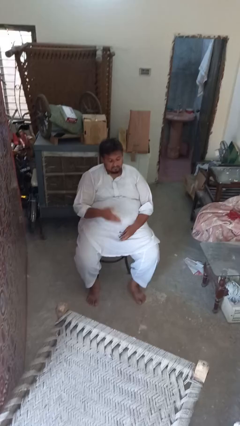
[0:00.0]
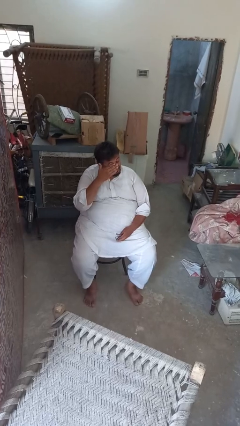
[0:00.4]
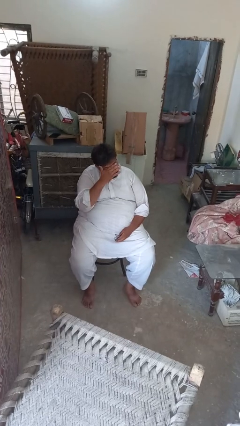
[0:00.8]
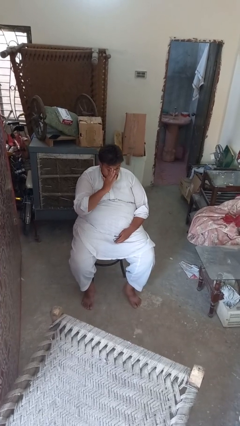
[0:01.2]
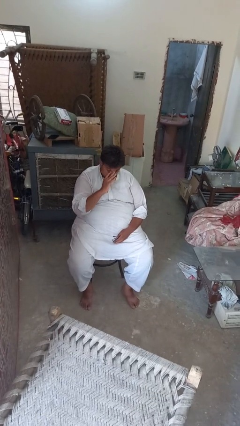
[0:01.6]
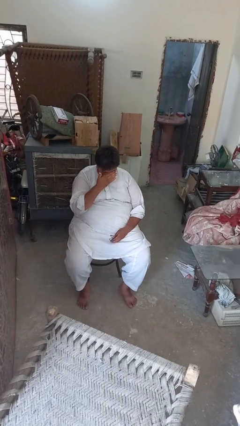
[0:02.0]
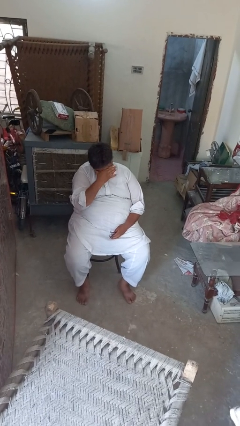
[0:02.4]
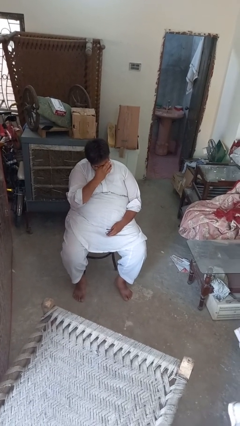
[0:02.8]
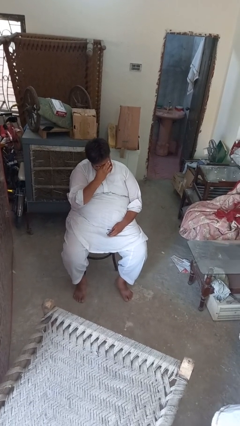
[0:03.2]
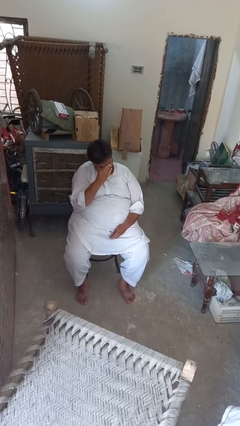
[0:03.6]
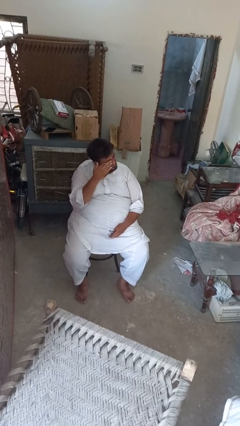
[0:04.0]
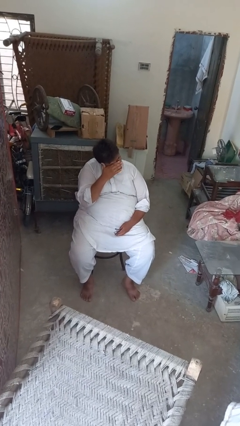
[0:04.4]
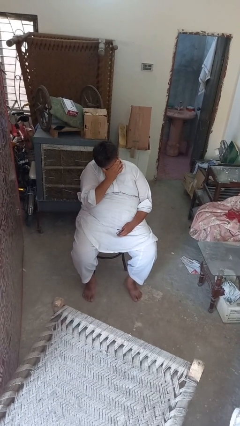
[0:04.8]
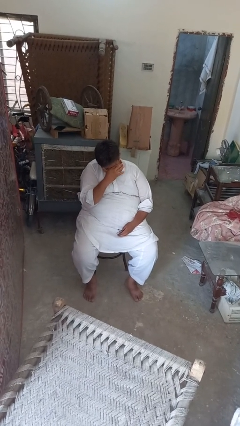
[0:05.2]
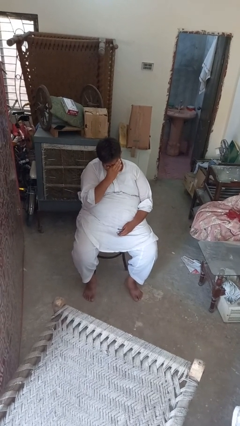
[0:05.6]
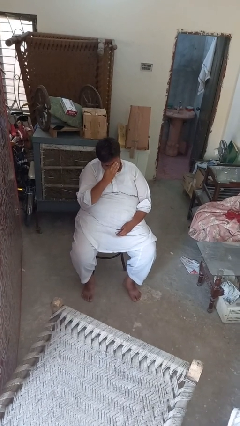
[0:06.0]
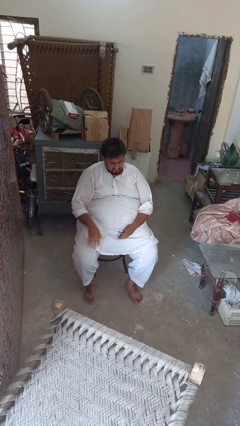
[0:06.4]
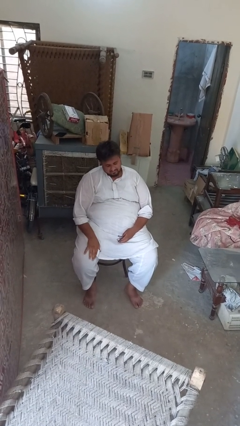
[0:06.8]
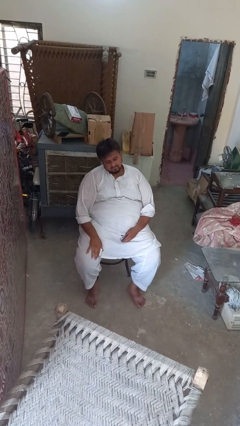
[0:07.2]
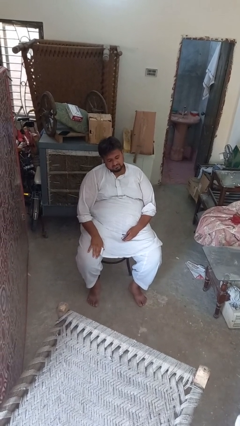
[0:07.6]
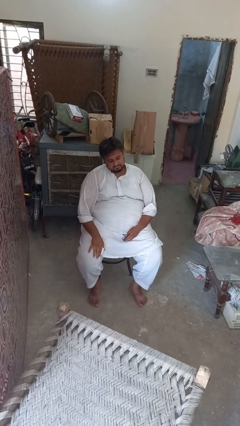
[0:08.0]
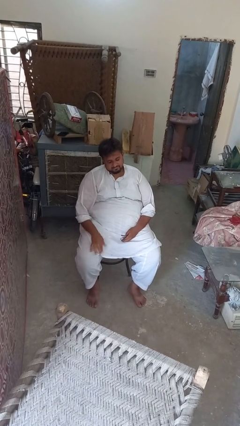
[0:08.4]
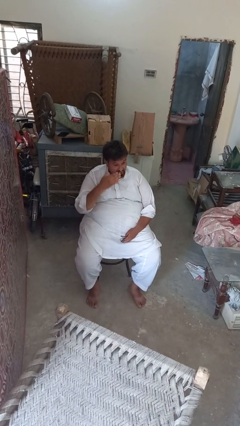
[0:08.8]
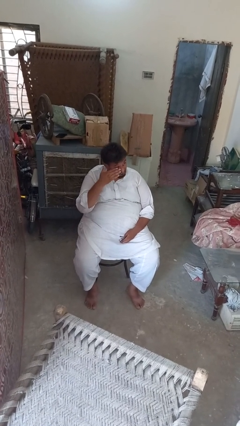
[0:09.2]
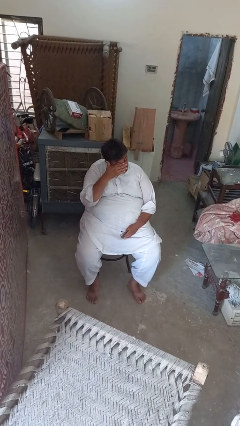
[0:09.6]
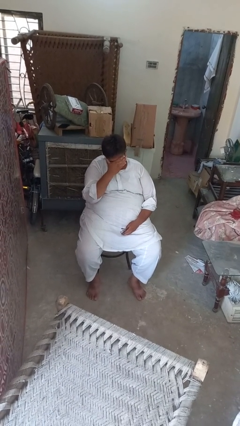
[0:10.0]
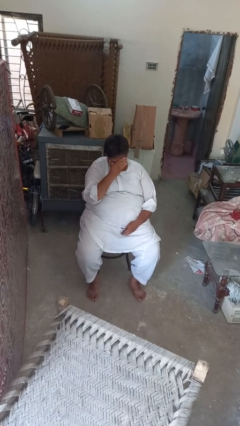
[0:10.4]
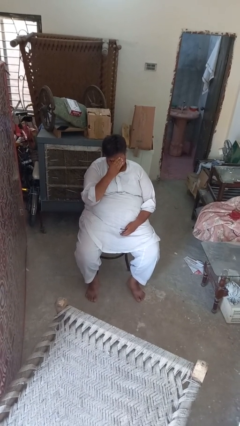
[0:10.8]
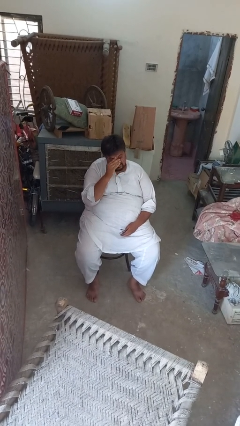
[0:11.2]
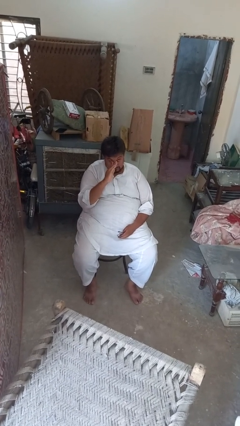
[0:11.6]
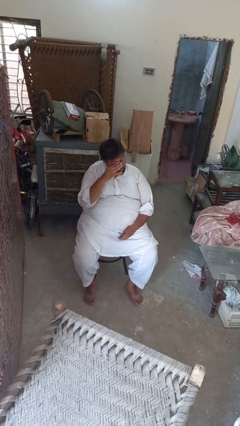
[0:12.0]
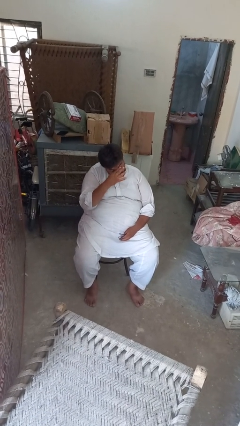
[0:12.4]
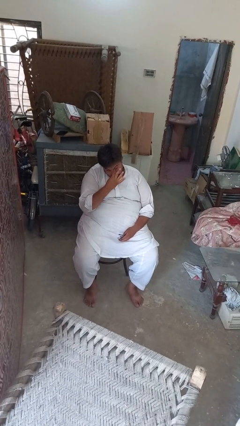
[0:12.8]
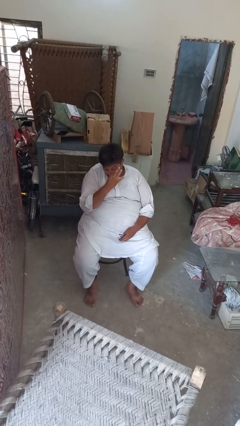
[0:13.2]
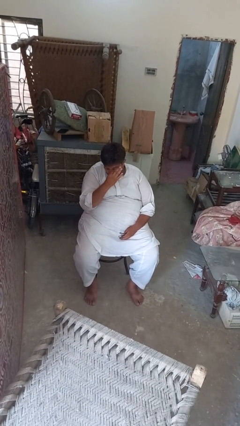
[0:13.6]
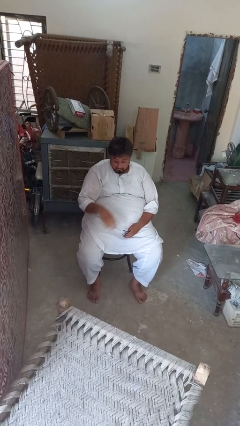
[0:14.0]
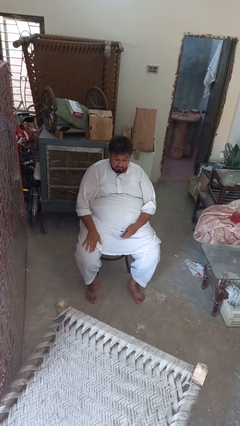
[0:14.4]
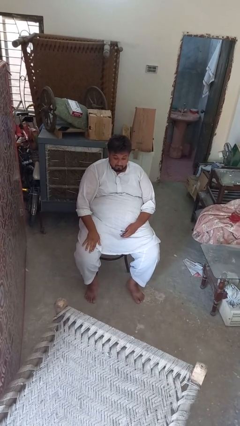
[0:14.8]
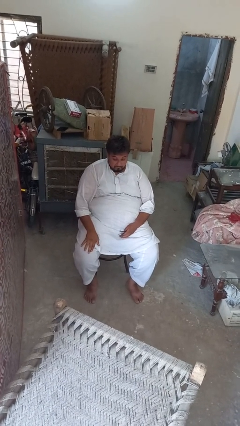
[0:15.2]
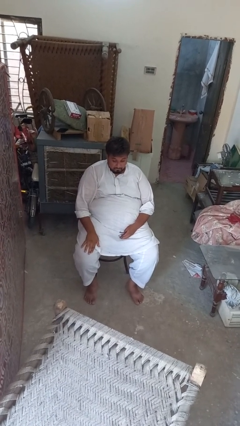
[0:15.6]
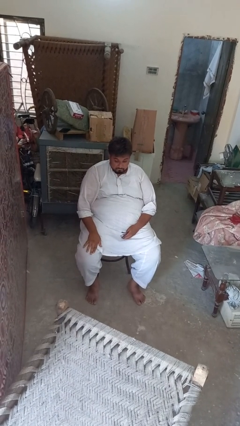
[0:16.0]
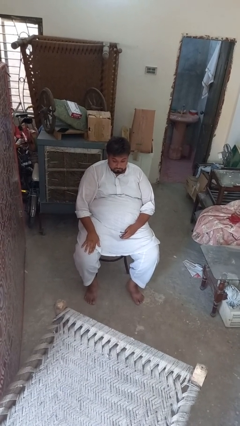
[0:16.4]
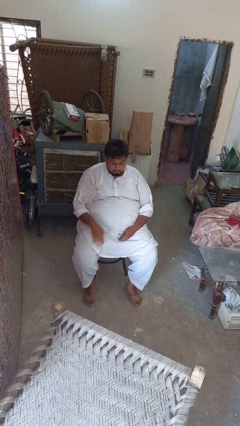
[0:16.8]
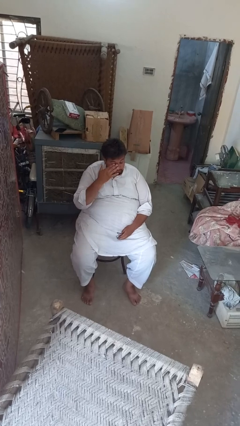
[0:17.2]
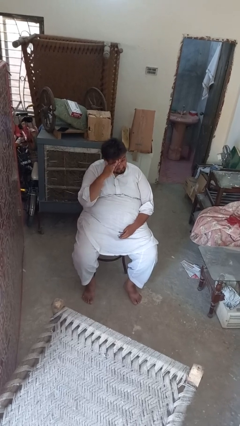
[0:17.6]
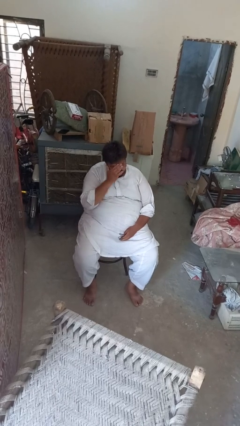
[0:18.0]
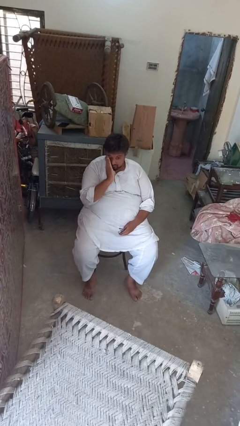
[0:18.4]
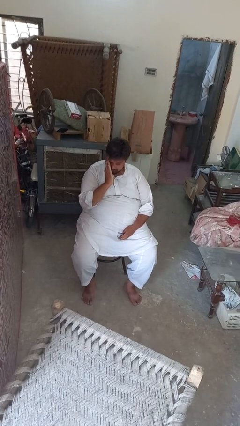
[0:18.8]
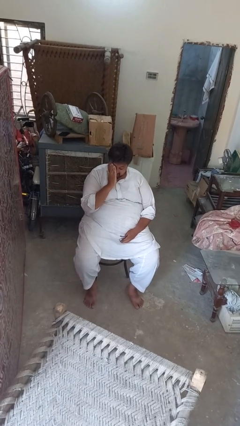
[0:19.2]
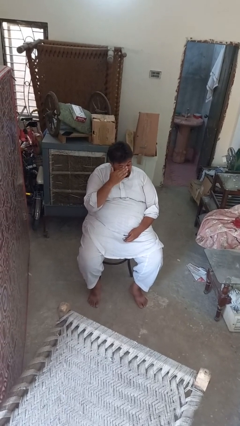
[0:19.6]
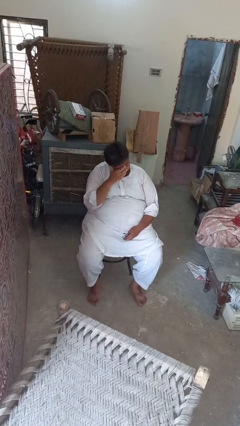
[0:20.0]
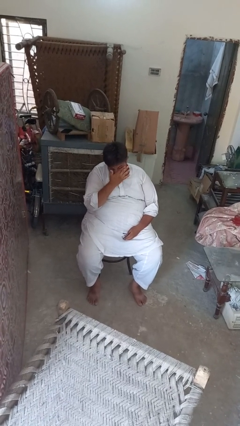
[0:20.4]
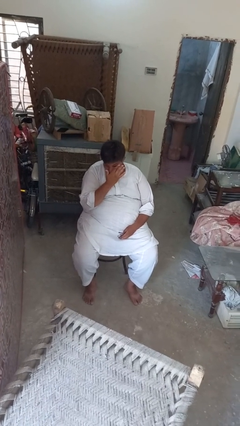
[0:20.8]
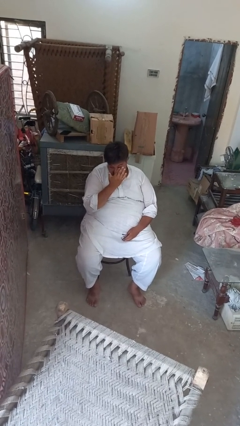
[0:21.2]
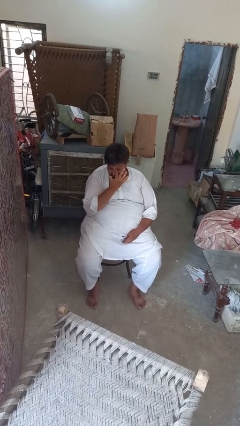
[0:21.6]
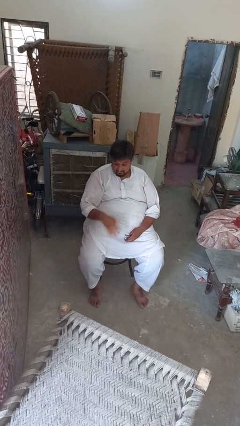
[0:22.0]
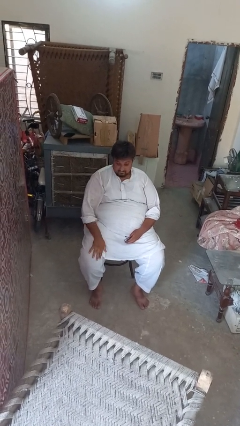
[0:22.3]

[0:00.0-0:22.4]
person rubs eyes

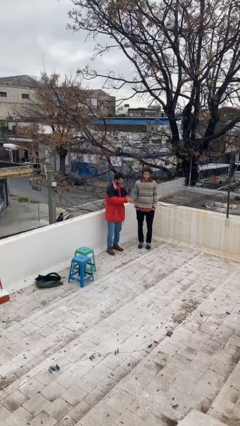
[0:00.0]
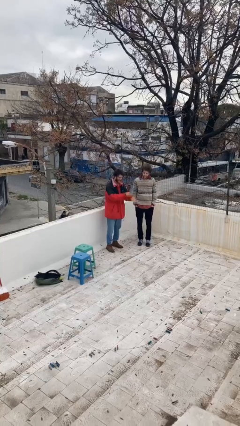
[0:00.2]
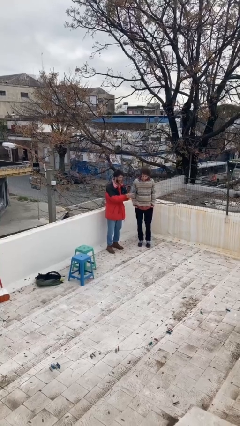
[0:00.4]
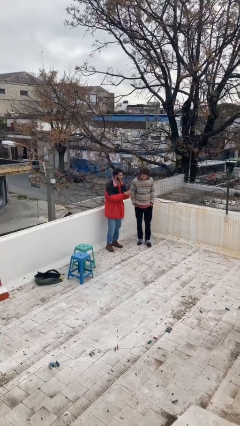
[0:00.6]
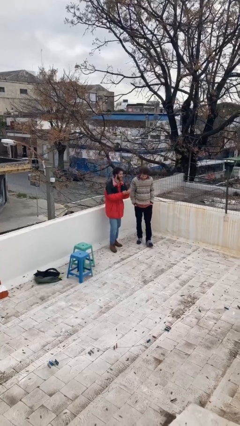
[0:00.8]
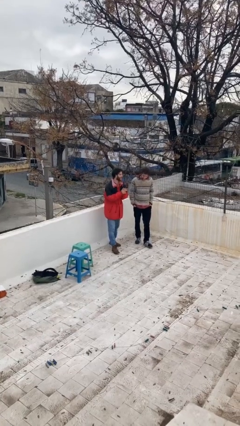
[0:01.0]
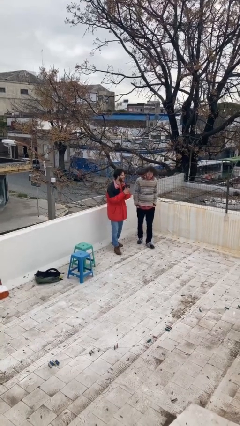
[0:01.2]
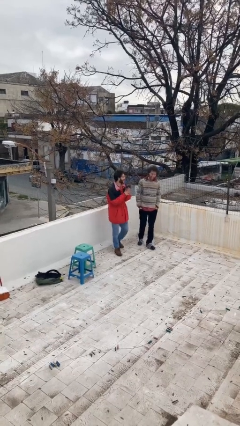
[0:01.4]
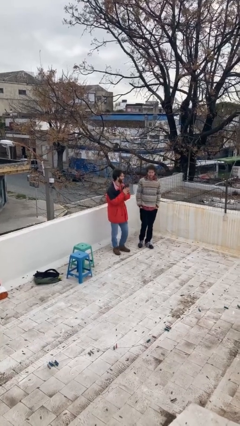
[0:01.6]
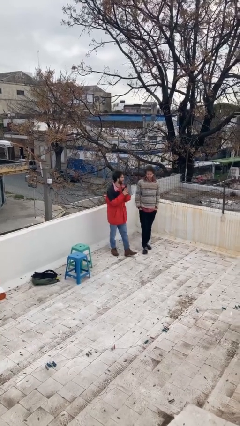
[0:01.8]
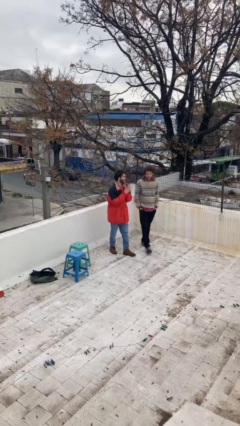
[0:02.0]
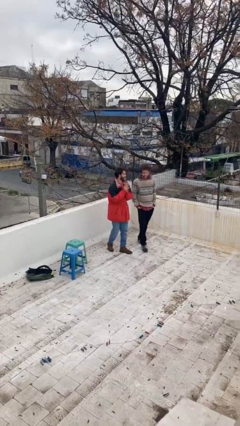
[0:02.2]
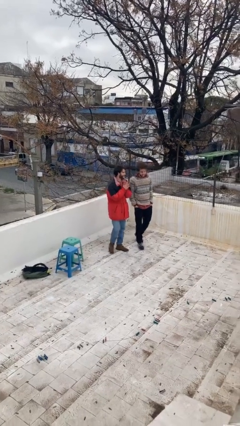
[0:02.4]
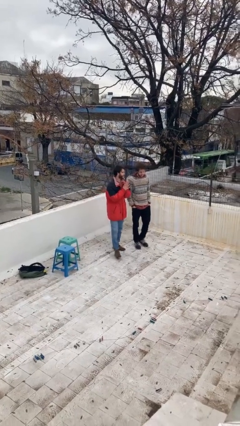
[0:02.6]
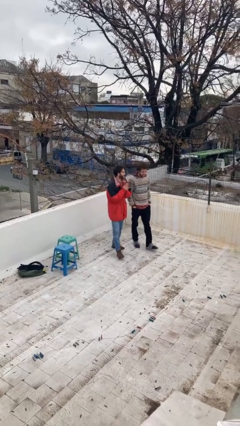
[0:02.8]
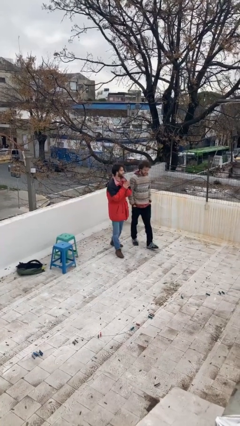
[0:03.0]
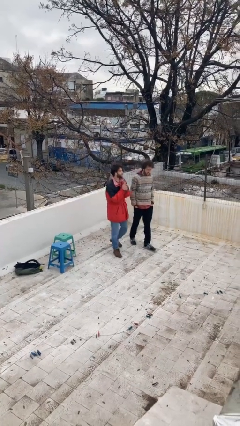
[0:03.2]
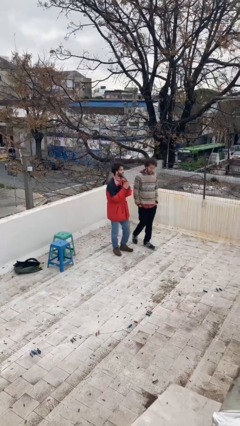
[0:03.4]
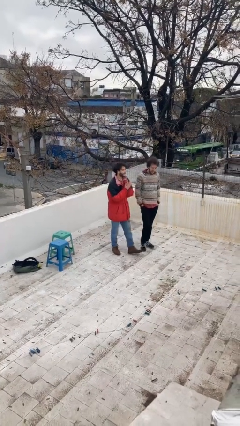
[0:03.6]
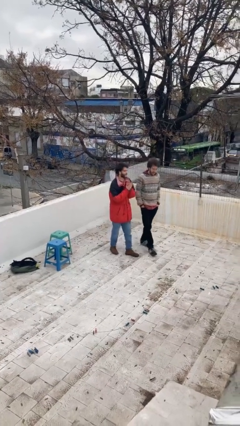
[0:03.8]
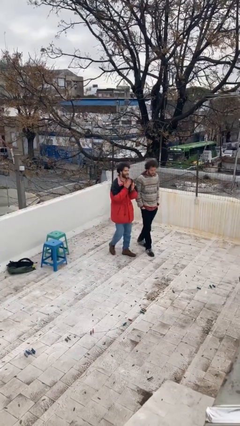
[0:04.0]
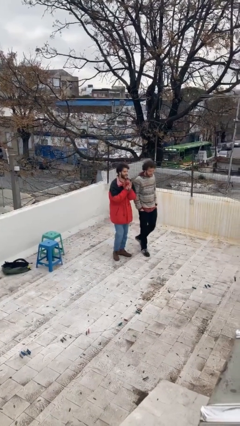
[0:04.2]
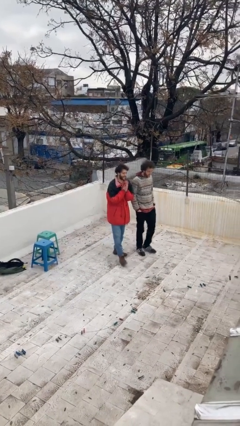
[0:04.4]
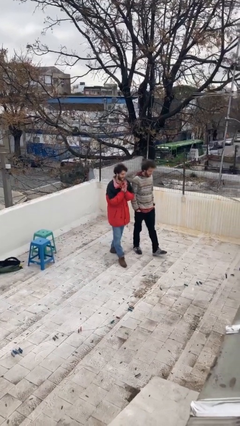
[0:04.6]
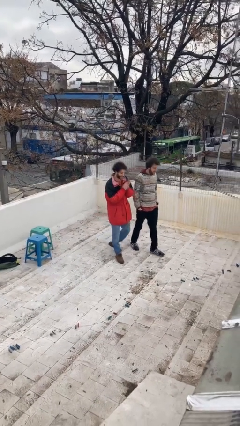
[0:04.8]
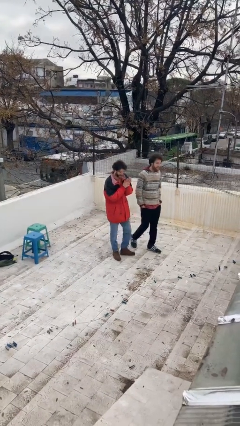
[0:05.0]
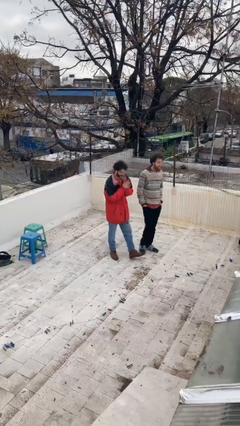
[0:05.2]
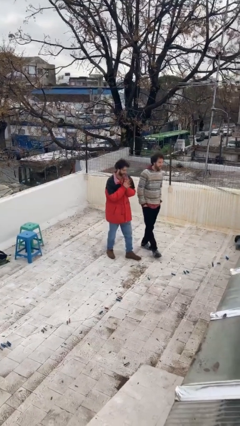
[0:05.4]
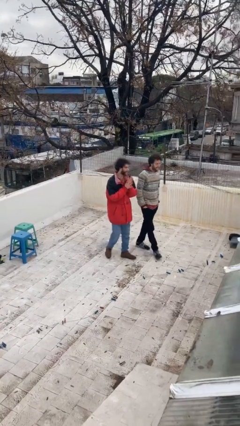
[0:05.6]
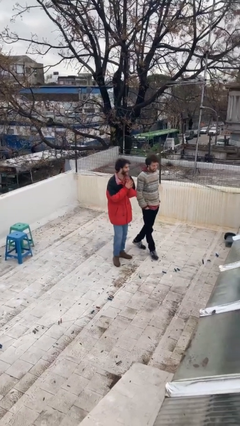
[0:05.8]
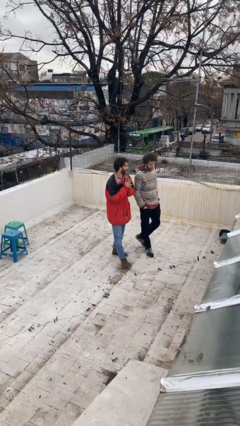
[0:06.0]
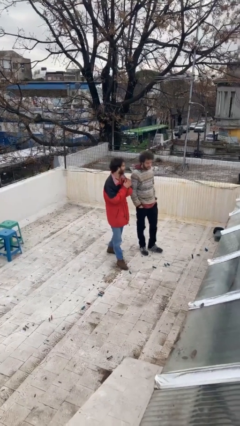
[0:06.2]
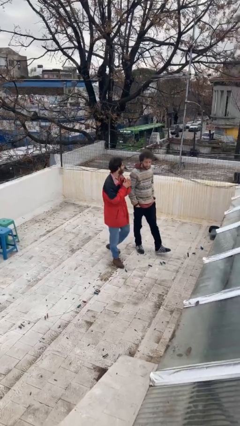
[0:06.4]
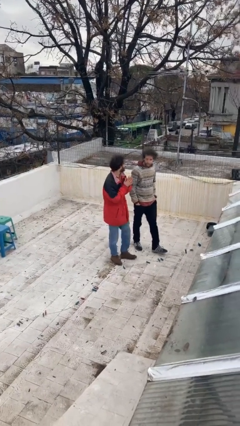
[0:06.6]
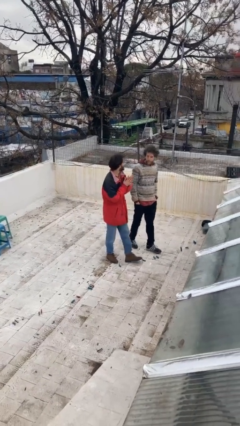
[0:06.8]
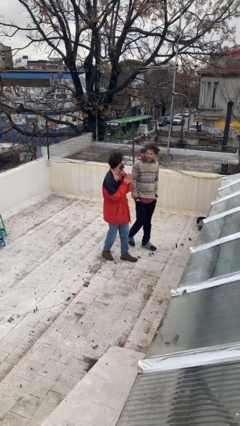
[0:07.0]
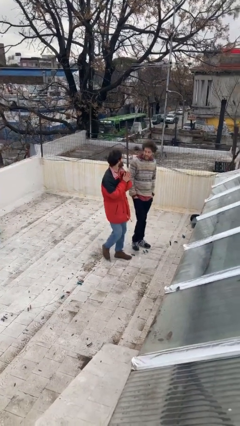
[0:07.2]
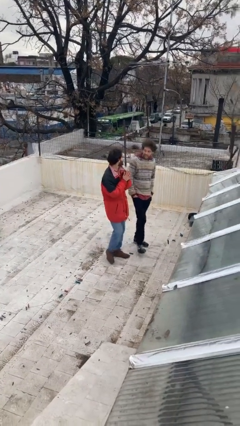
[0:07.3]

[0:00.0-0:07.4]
person talks to person
